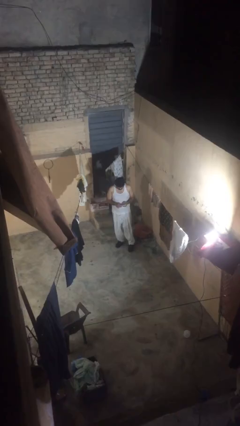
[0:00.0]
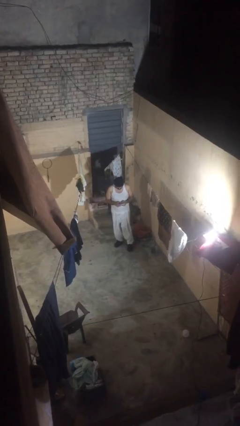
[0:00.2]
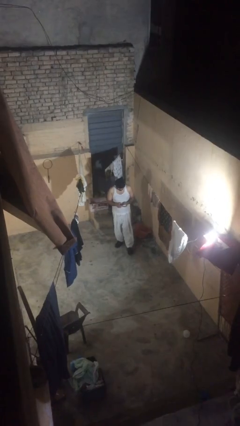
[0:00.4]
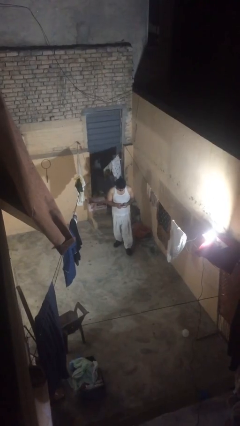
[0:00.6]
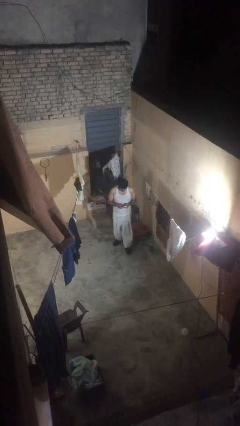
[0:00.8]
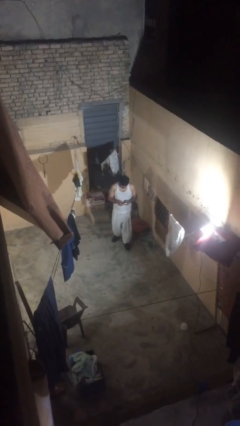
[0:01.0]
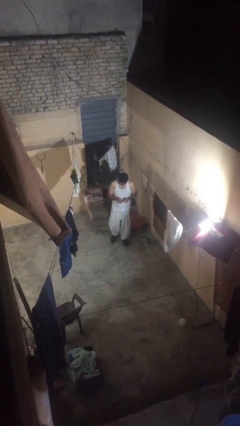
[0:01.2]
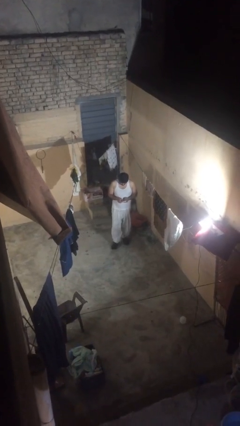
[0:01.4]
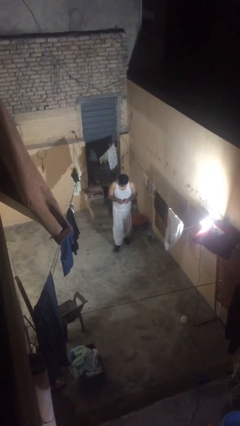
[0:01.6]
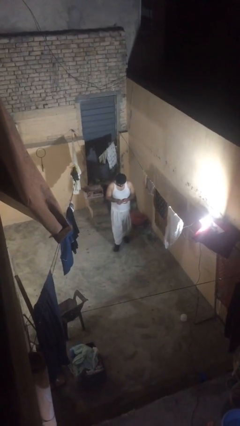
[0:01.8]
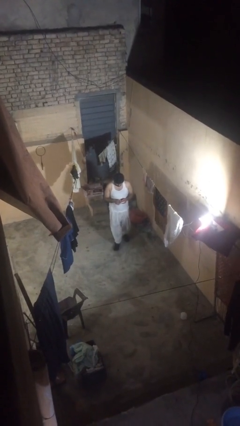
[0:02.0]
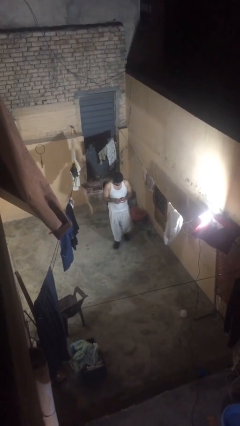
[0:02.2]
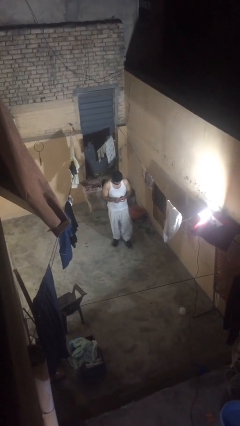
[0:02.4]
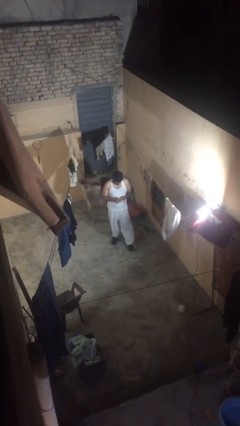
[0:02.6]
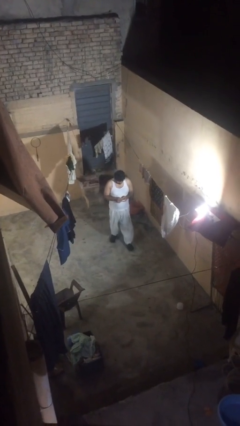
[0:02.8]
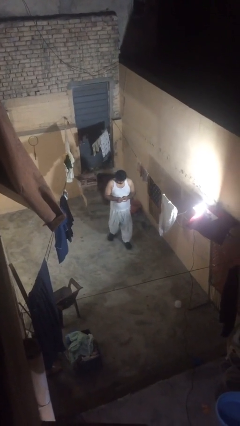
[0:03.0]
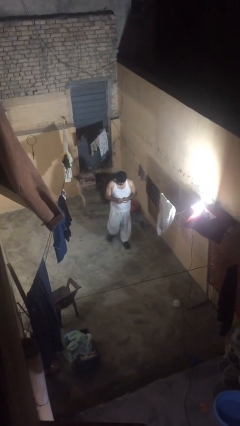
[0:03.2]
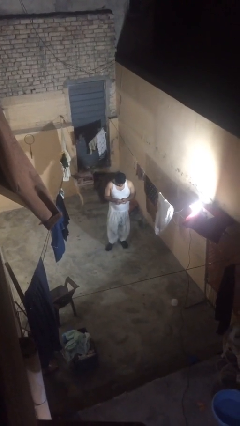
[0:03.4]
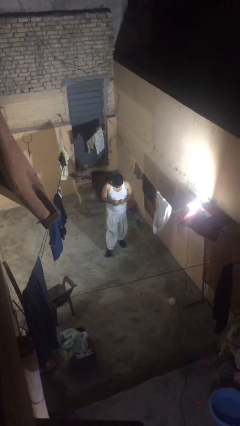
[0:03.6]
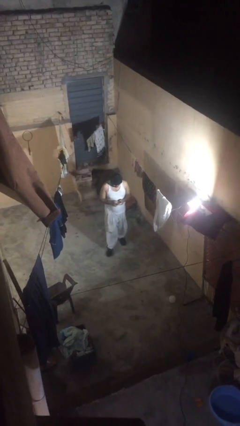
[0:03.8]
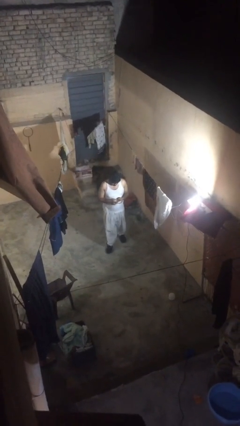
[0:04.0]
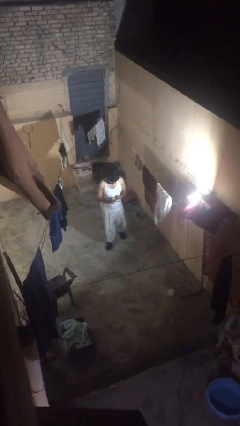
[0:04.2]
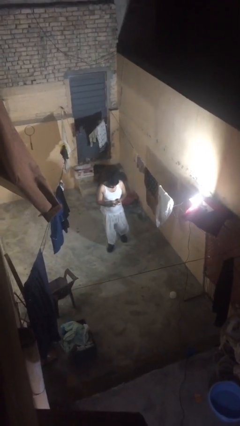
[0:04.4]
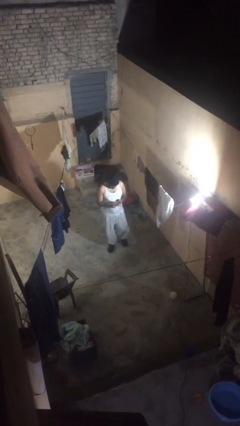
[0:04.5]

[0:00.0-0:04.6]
person texts on phone

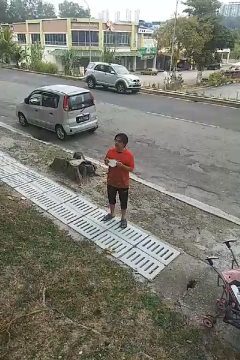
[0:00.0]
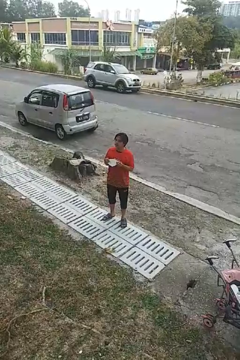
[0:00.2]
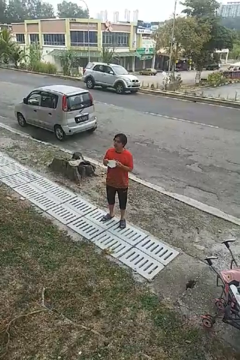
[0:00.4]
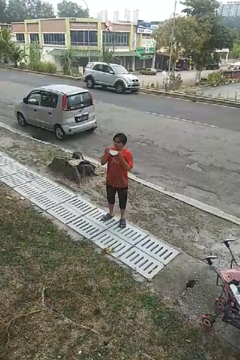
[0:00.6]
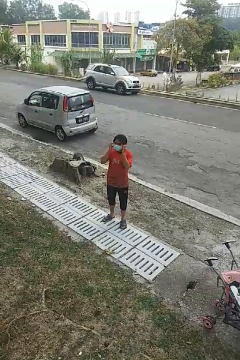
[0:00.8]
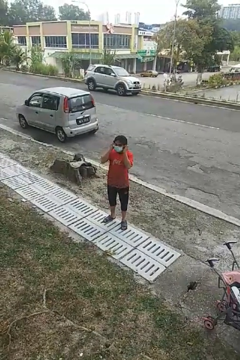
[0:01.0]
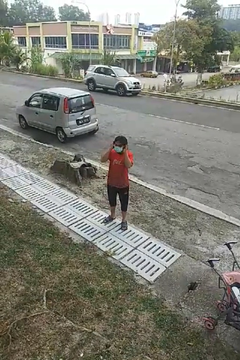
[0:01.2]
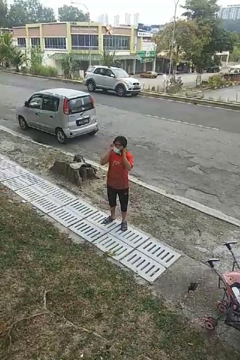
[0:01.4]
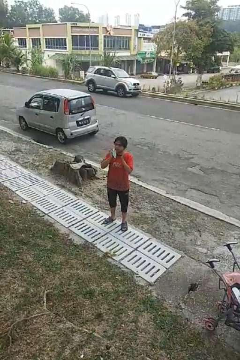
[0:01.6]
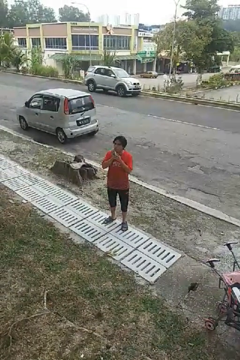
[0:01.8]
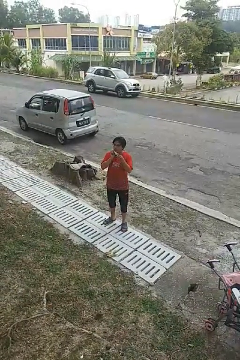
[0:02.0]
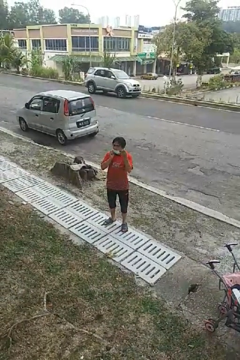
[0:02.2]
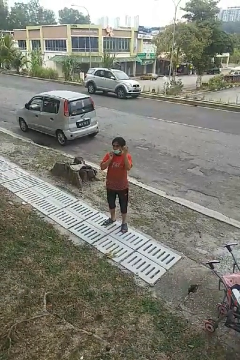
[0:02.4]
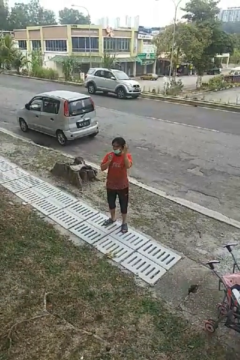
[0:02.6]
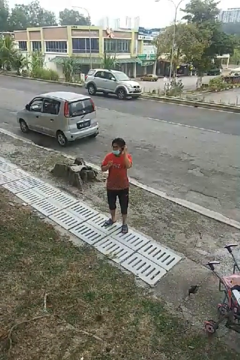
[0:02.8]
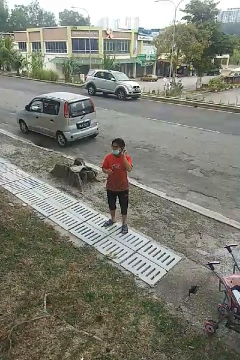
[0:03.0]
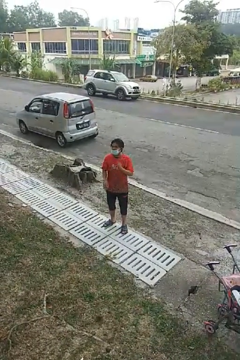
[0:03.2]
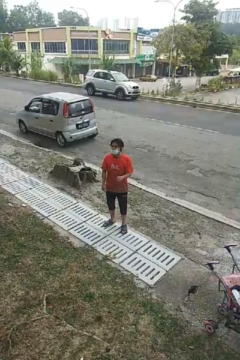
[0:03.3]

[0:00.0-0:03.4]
person puts on facemask

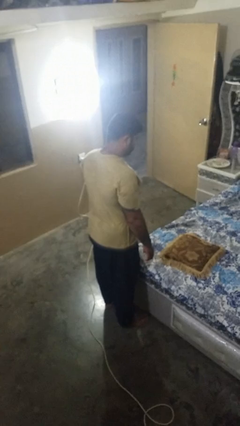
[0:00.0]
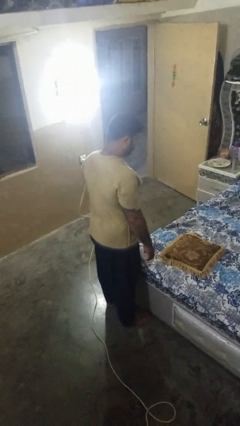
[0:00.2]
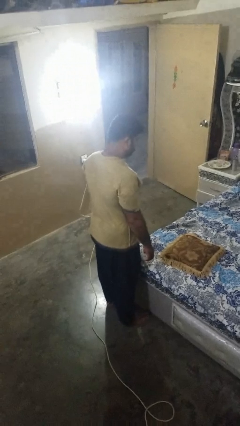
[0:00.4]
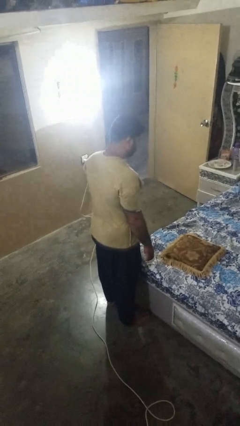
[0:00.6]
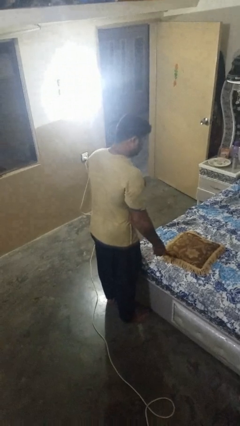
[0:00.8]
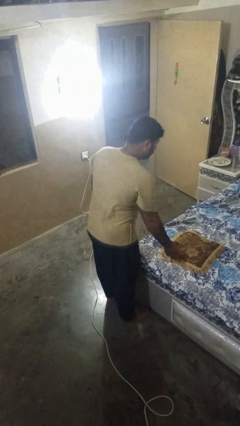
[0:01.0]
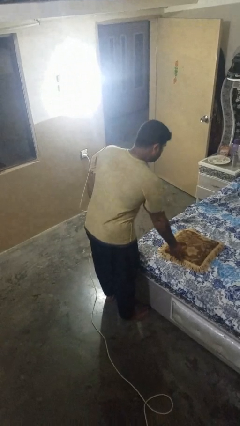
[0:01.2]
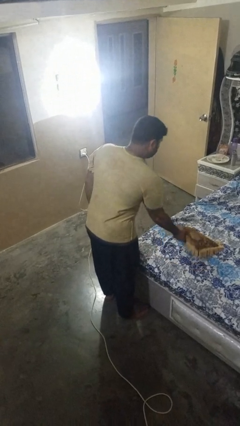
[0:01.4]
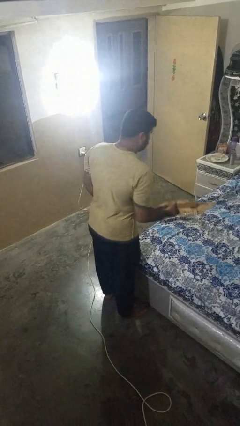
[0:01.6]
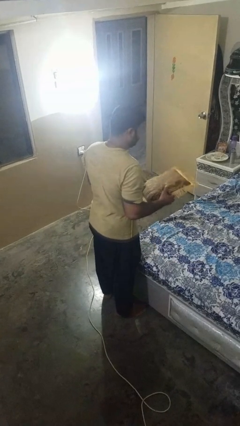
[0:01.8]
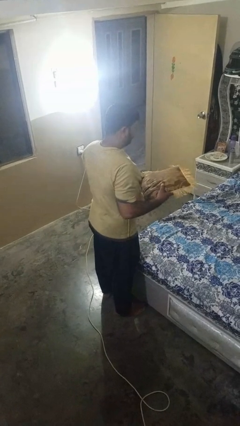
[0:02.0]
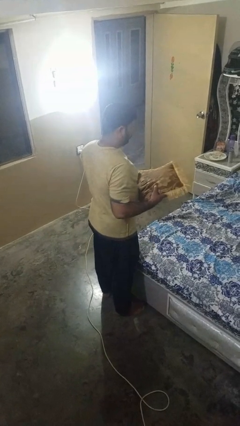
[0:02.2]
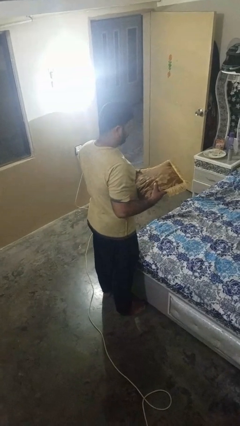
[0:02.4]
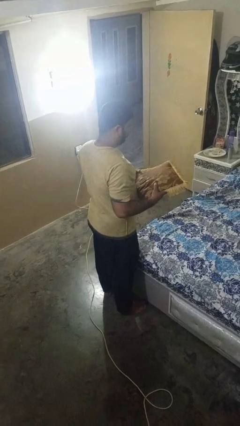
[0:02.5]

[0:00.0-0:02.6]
person picks up object from bed

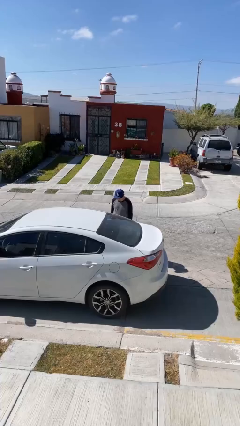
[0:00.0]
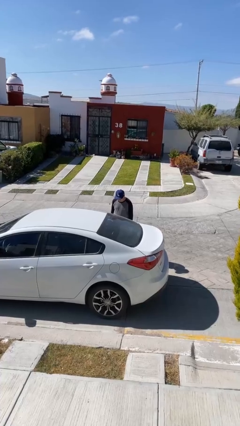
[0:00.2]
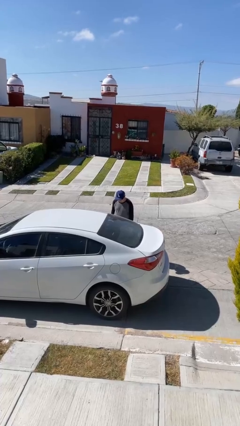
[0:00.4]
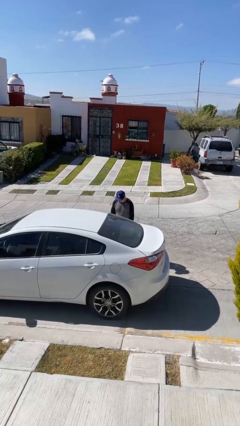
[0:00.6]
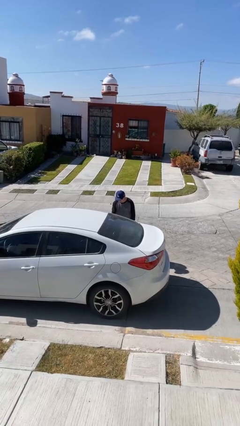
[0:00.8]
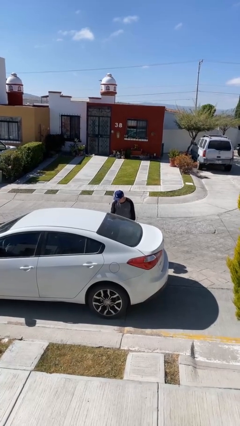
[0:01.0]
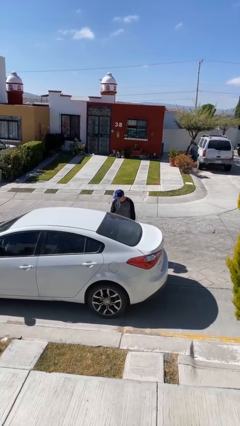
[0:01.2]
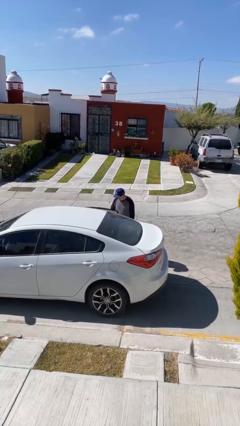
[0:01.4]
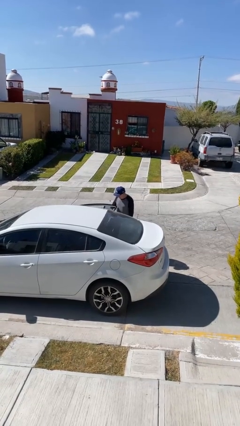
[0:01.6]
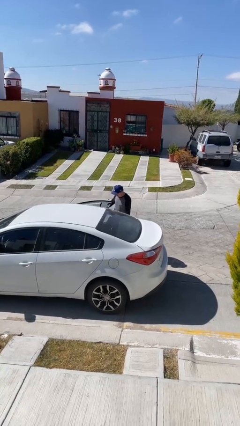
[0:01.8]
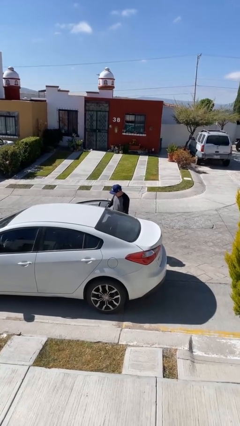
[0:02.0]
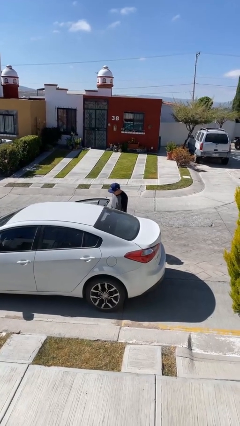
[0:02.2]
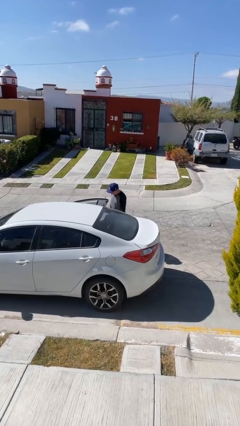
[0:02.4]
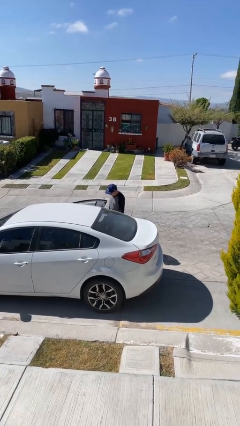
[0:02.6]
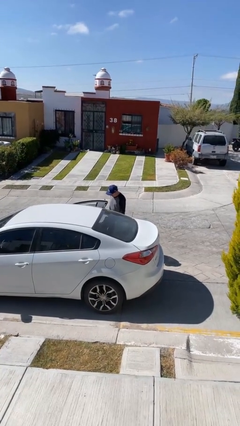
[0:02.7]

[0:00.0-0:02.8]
person opens car door

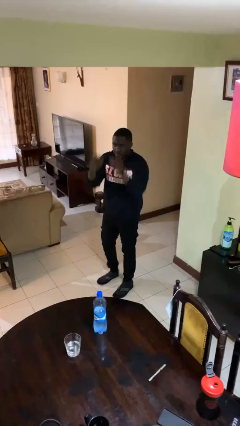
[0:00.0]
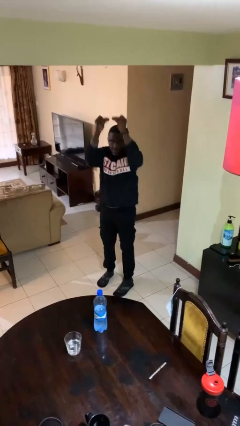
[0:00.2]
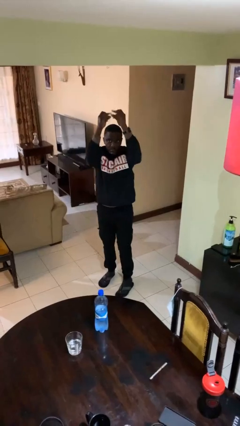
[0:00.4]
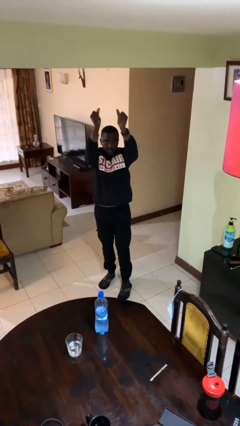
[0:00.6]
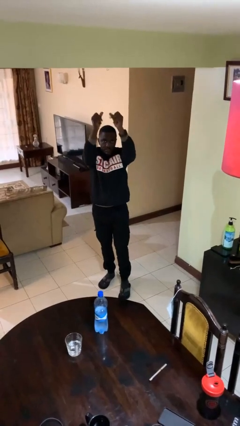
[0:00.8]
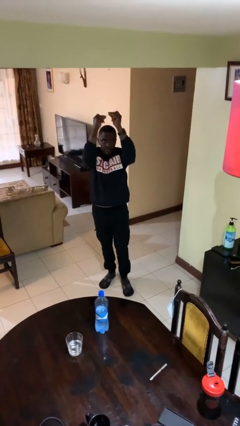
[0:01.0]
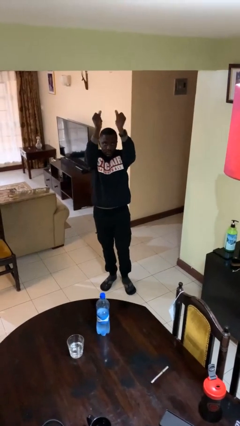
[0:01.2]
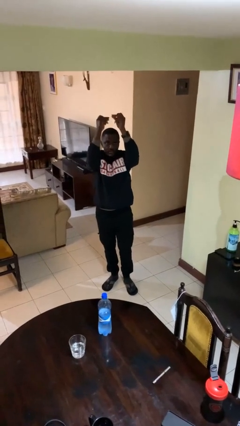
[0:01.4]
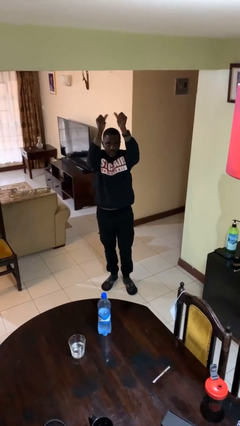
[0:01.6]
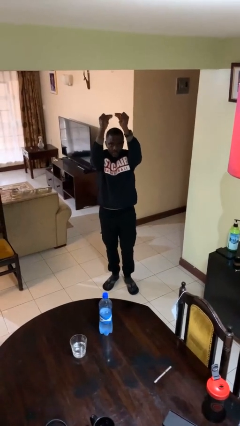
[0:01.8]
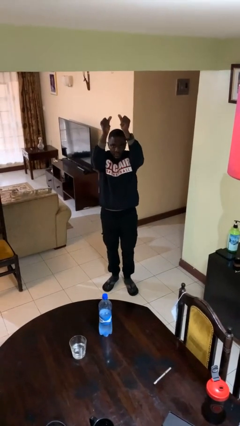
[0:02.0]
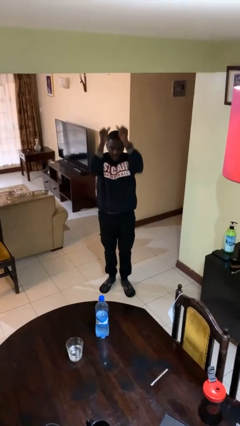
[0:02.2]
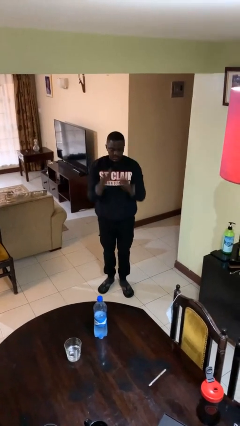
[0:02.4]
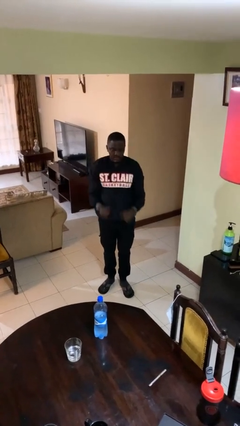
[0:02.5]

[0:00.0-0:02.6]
person snaps fingers

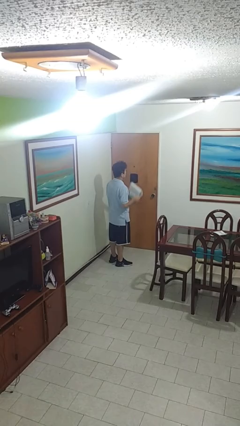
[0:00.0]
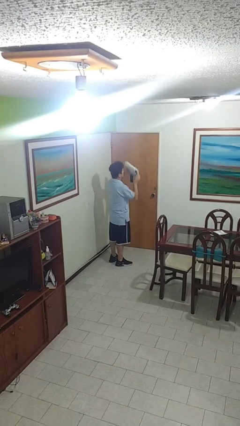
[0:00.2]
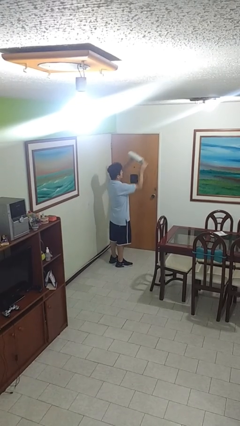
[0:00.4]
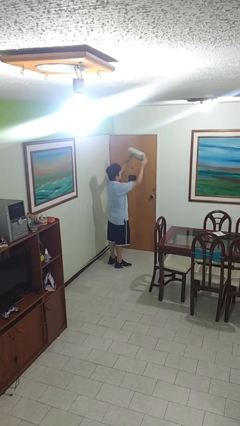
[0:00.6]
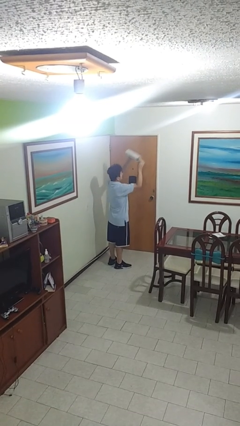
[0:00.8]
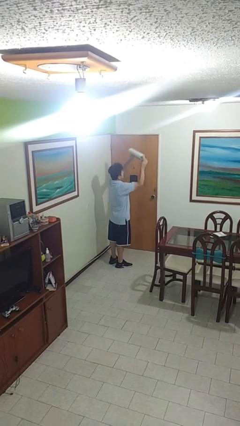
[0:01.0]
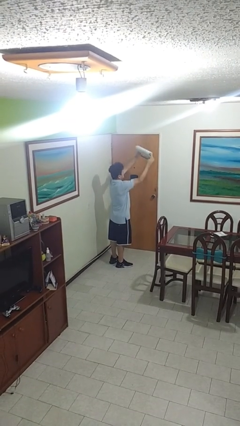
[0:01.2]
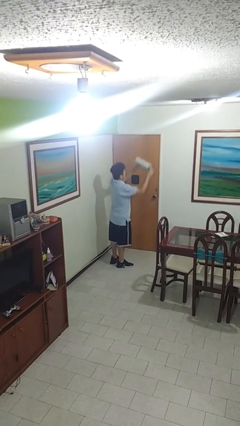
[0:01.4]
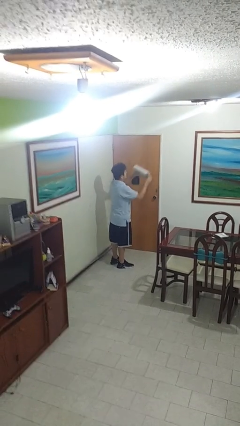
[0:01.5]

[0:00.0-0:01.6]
person holds object above head

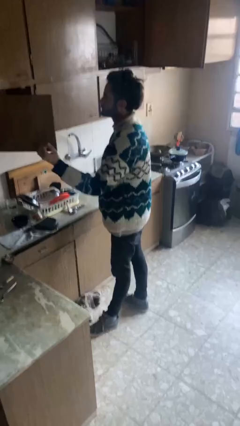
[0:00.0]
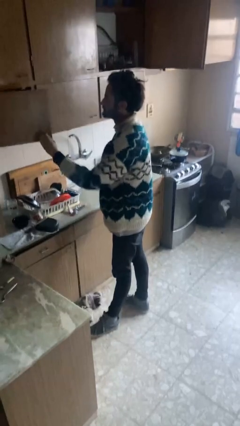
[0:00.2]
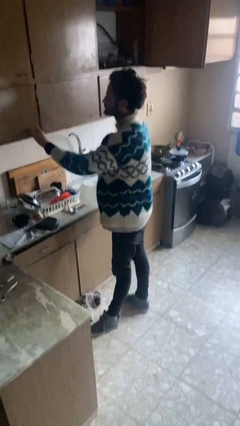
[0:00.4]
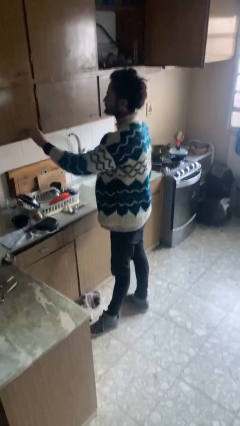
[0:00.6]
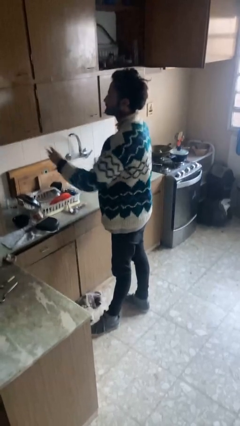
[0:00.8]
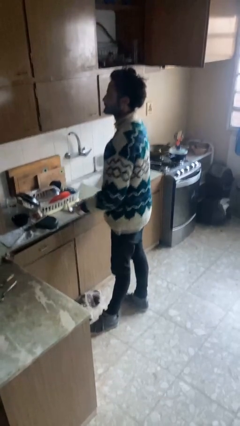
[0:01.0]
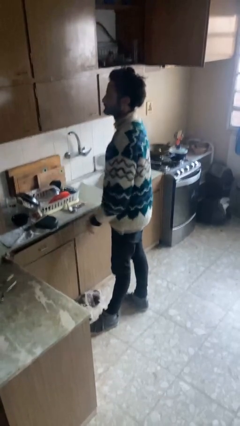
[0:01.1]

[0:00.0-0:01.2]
person closes cabinet
